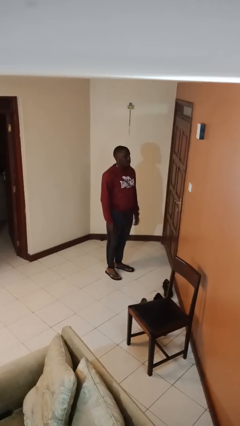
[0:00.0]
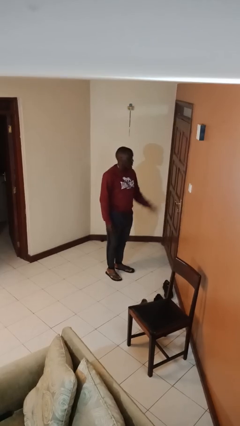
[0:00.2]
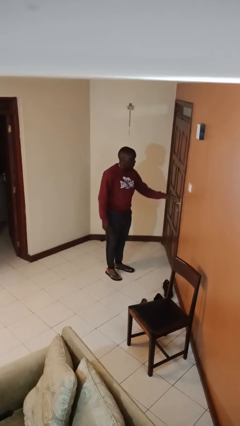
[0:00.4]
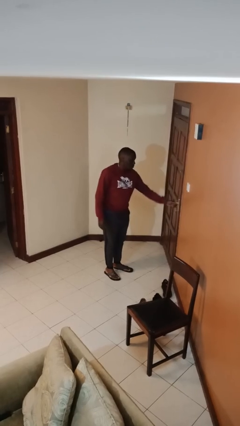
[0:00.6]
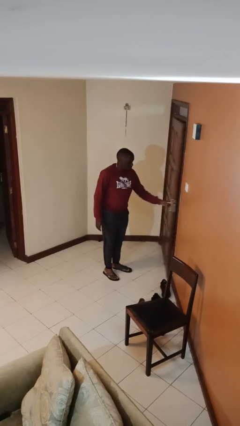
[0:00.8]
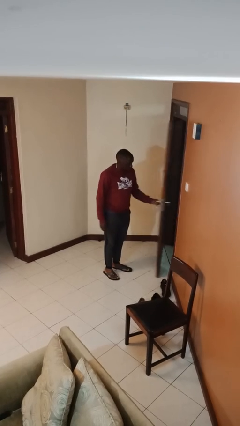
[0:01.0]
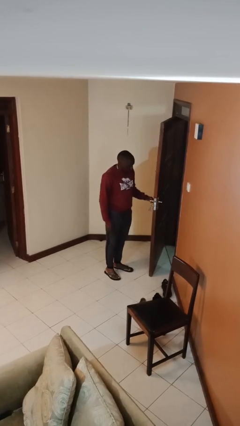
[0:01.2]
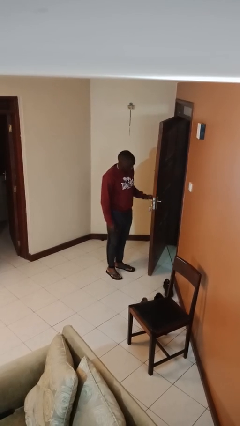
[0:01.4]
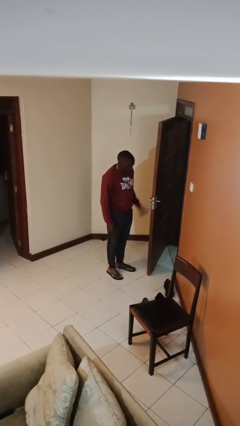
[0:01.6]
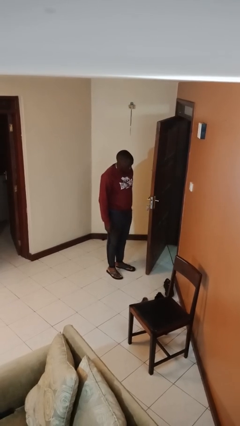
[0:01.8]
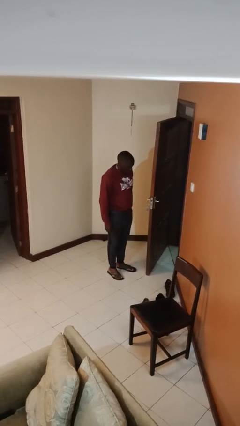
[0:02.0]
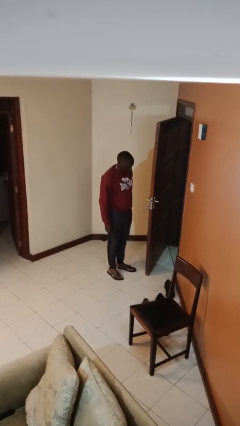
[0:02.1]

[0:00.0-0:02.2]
person opens facility door

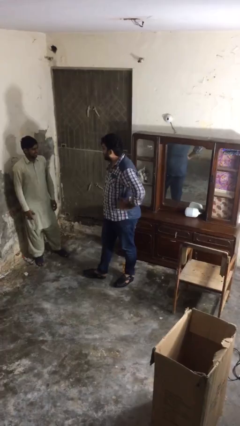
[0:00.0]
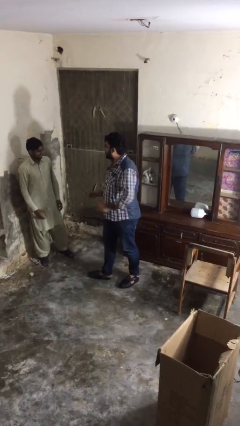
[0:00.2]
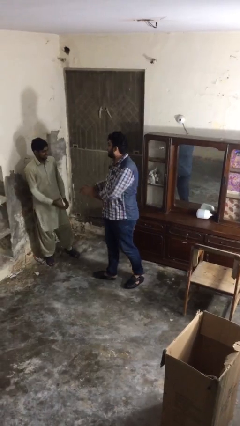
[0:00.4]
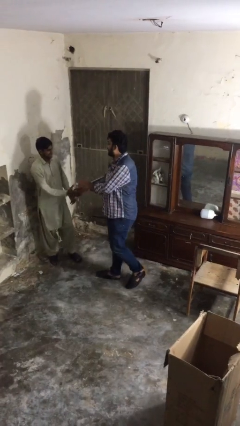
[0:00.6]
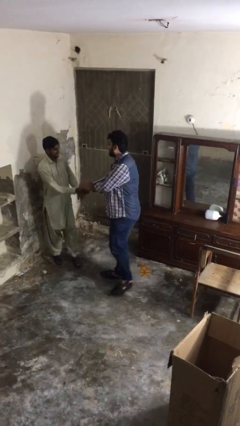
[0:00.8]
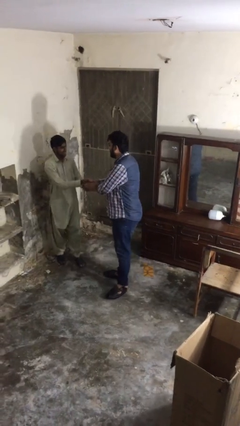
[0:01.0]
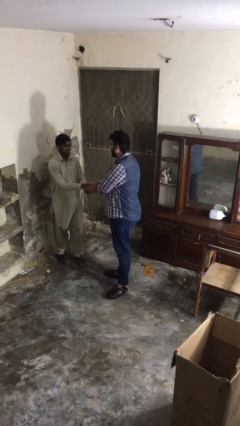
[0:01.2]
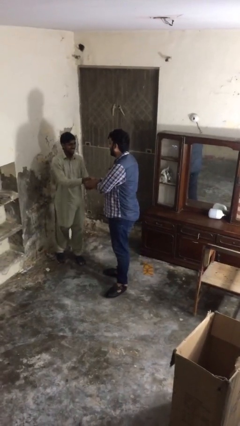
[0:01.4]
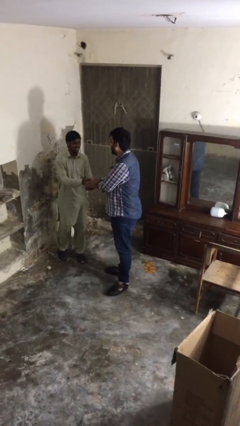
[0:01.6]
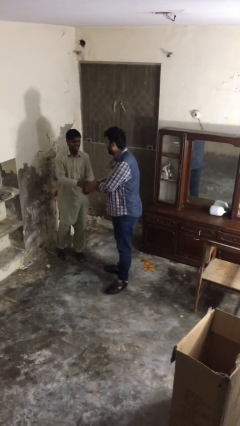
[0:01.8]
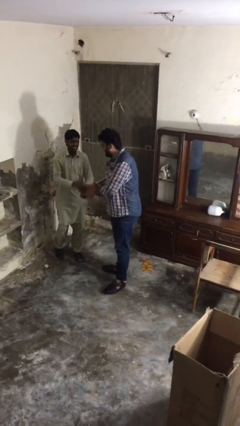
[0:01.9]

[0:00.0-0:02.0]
person shakes hand

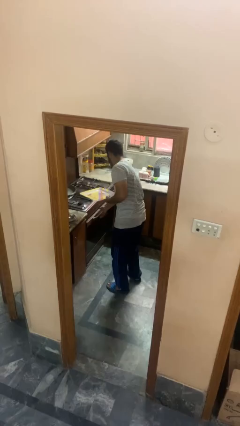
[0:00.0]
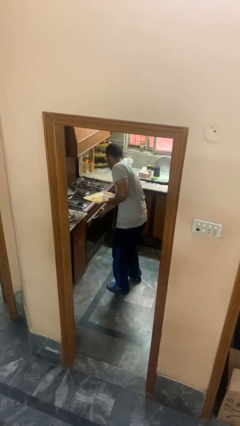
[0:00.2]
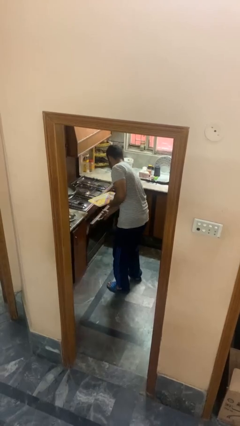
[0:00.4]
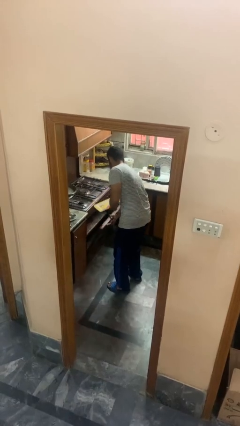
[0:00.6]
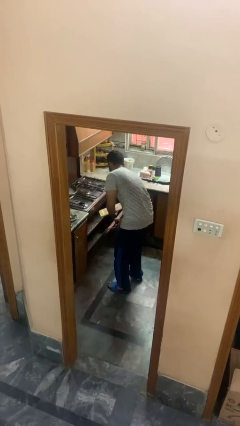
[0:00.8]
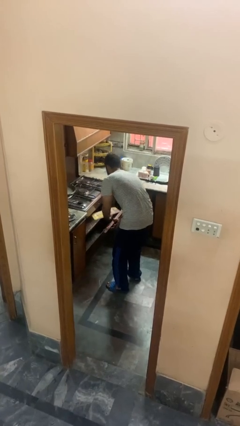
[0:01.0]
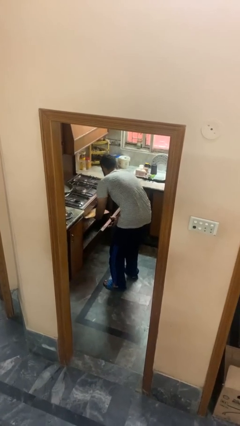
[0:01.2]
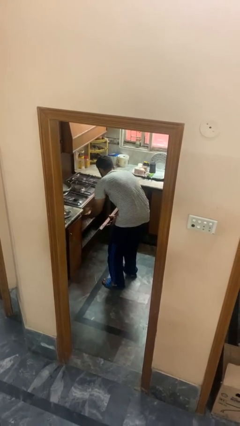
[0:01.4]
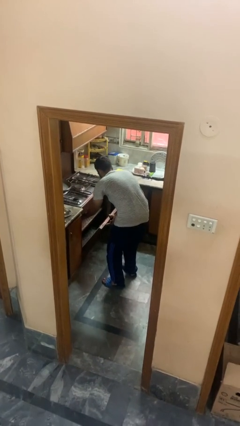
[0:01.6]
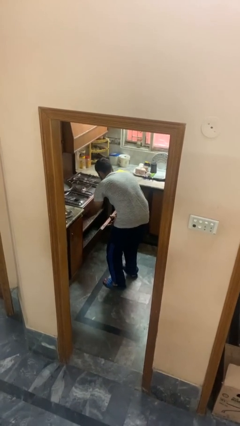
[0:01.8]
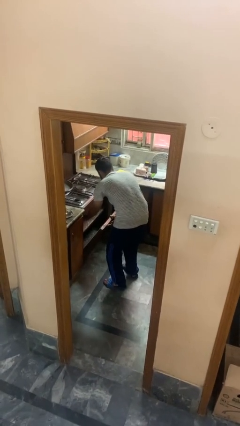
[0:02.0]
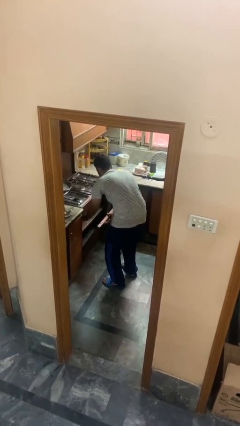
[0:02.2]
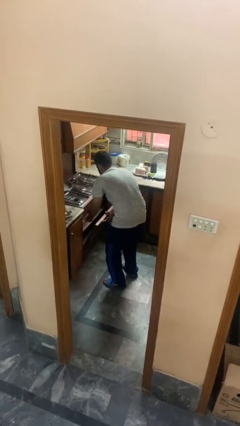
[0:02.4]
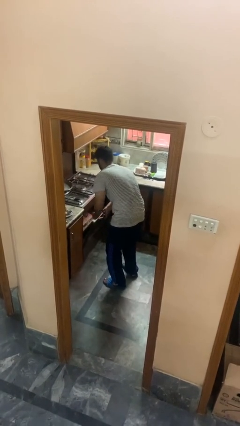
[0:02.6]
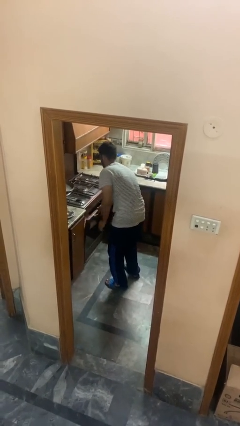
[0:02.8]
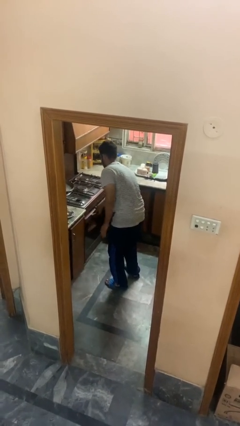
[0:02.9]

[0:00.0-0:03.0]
person puts object into oven

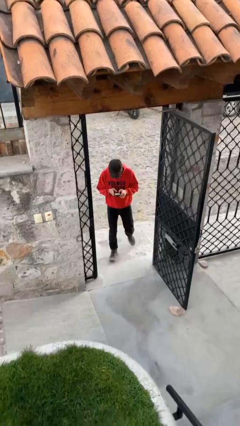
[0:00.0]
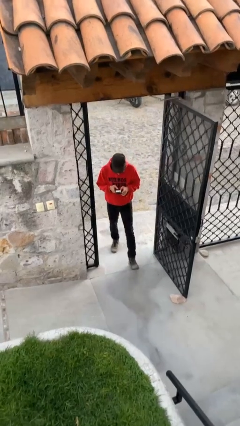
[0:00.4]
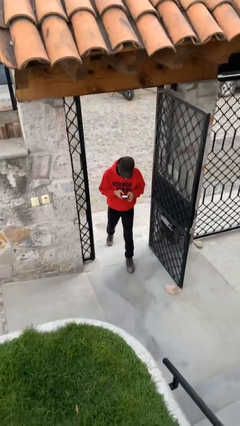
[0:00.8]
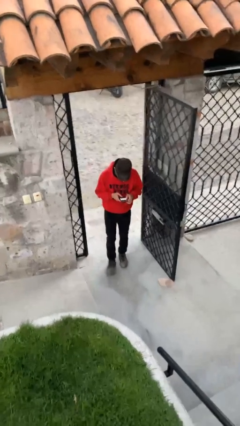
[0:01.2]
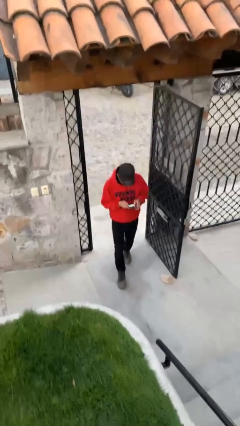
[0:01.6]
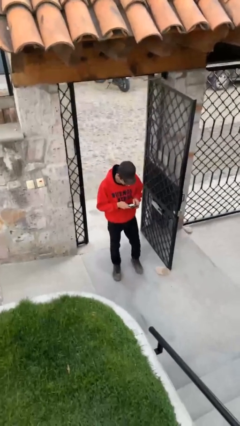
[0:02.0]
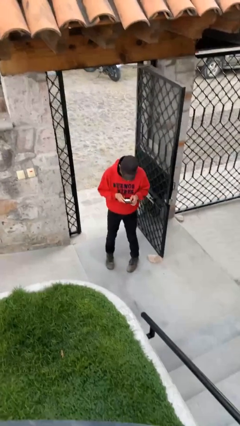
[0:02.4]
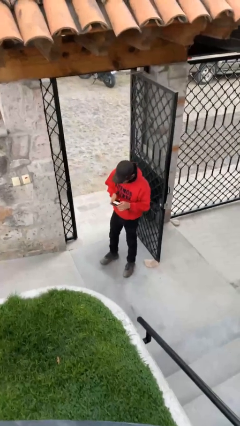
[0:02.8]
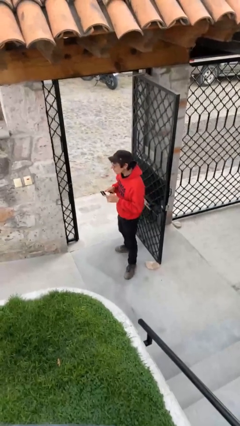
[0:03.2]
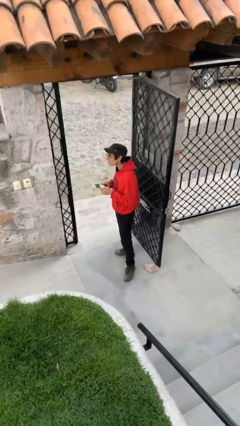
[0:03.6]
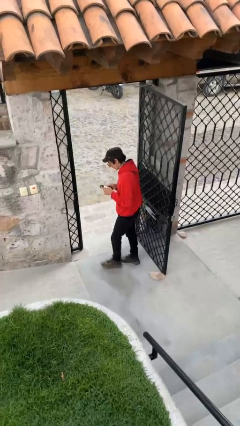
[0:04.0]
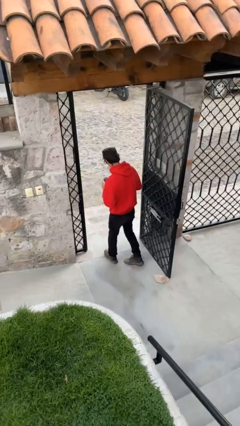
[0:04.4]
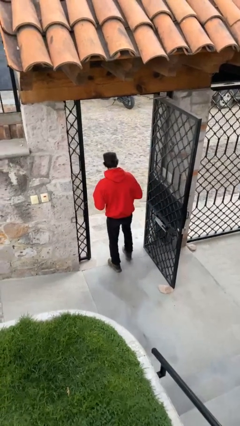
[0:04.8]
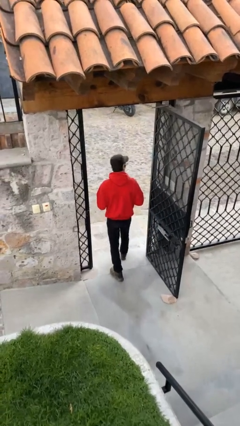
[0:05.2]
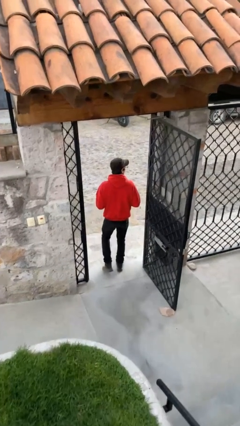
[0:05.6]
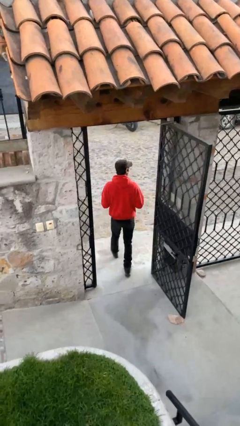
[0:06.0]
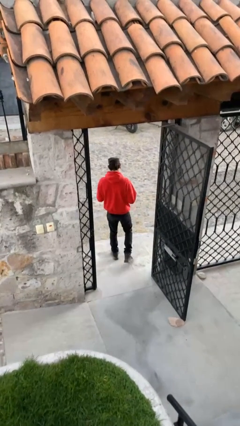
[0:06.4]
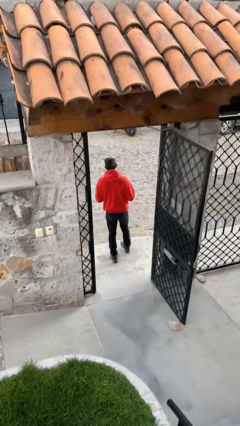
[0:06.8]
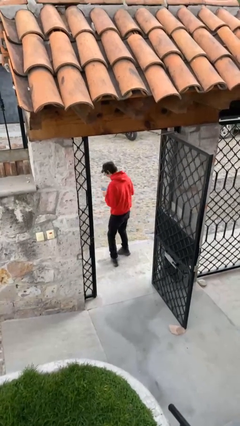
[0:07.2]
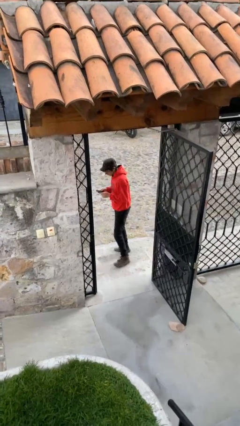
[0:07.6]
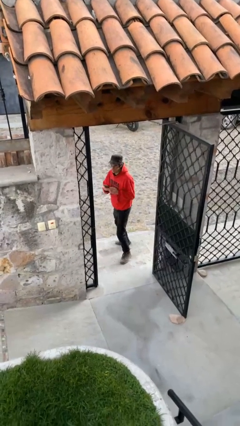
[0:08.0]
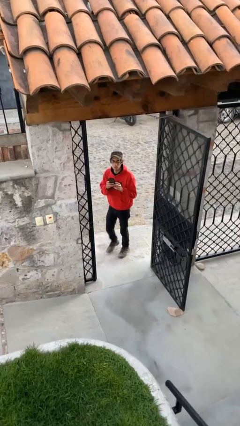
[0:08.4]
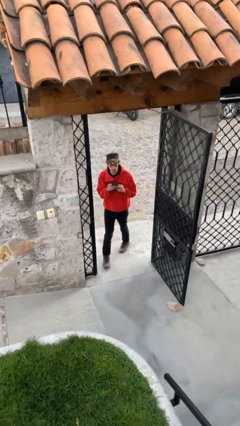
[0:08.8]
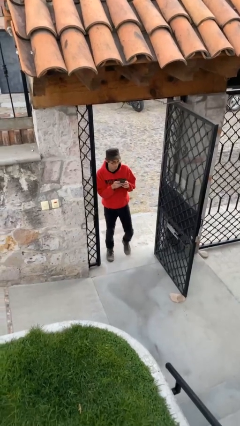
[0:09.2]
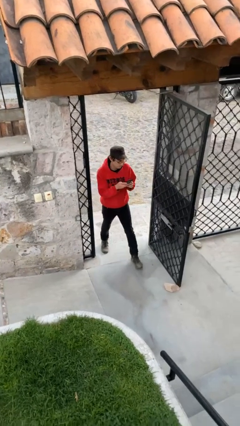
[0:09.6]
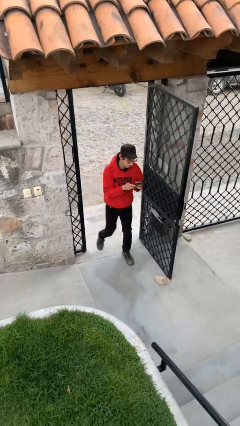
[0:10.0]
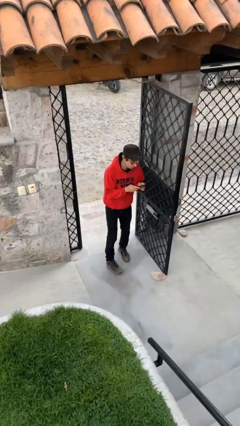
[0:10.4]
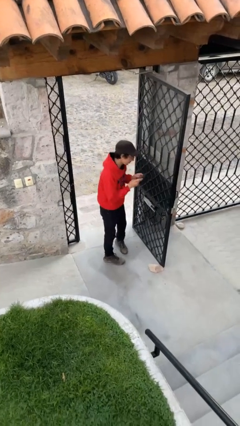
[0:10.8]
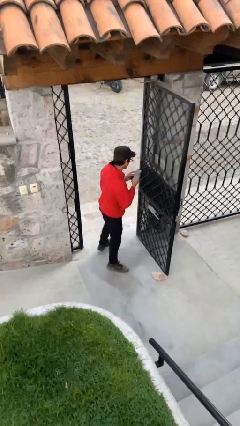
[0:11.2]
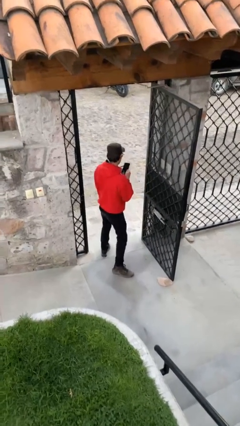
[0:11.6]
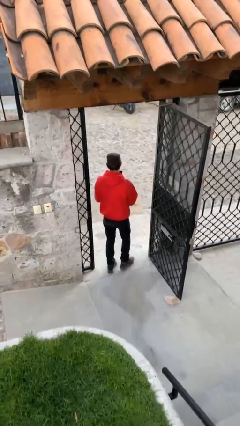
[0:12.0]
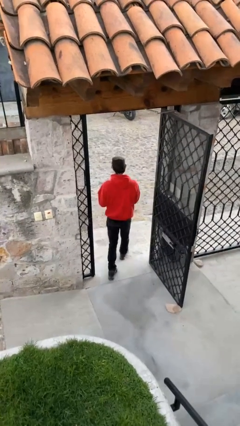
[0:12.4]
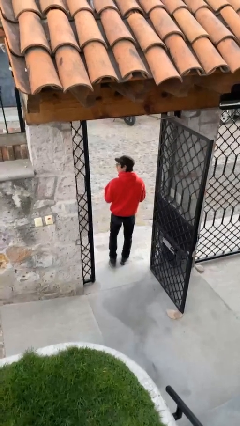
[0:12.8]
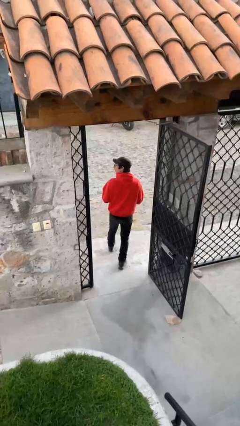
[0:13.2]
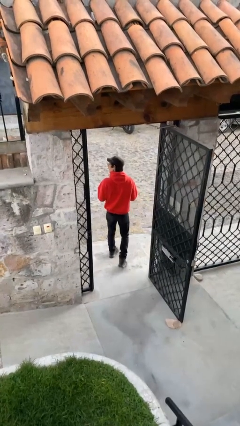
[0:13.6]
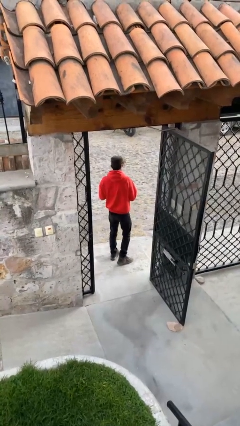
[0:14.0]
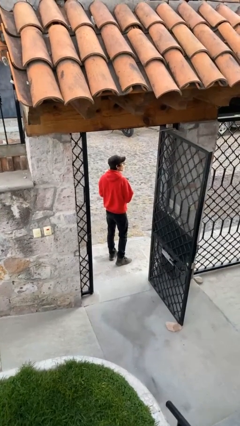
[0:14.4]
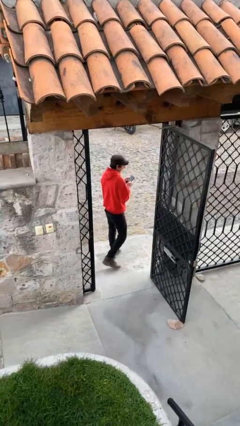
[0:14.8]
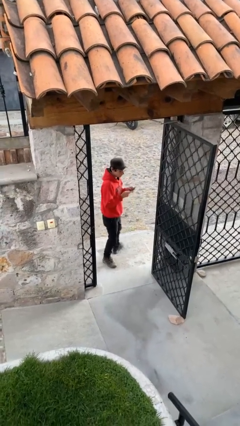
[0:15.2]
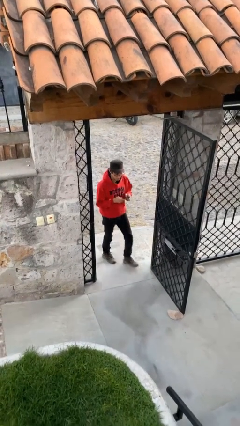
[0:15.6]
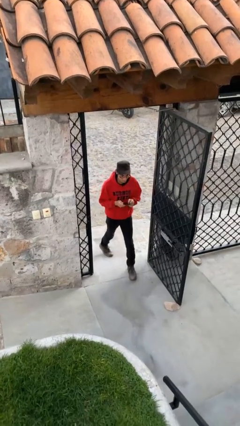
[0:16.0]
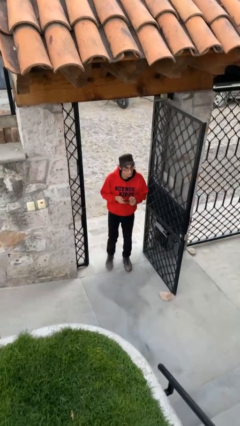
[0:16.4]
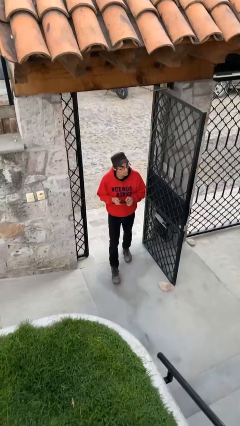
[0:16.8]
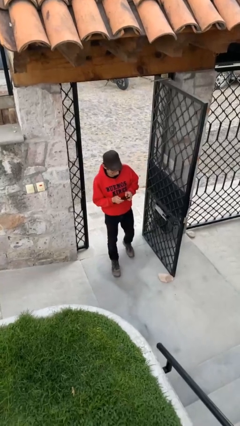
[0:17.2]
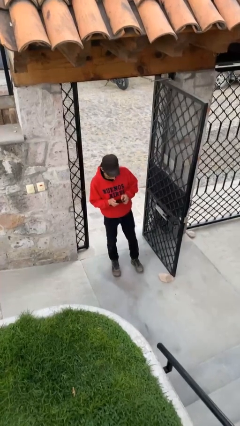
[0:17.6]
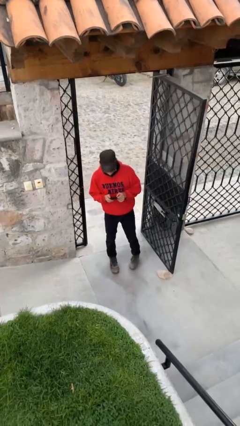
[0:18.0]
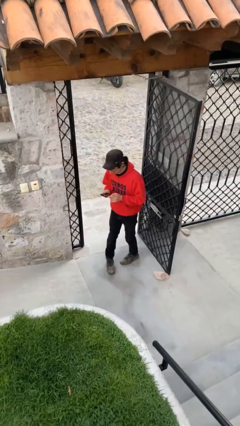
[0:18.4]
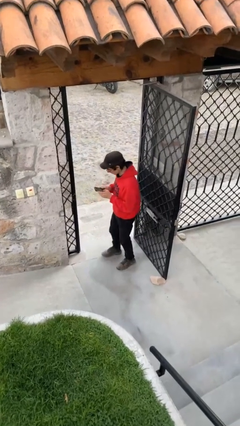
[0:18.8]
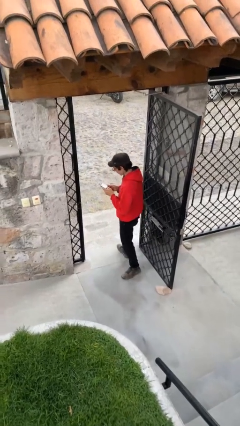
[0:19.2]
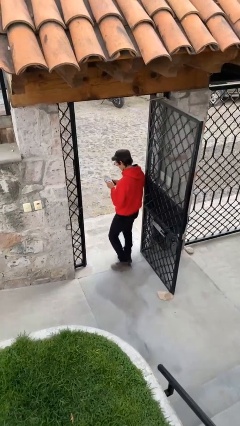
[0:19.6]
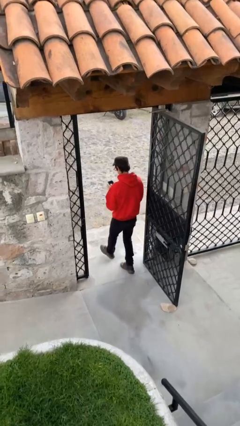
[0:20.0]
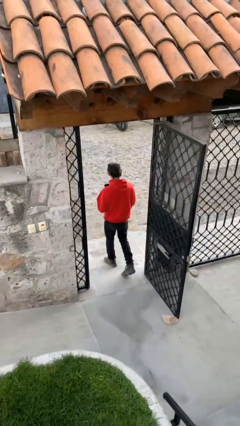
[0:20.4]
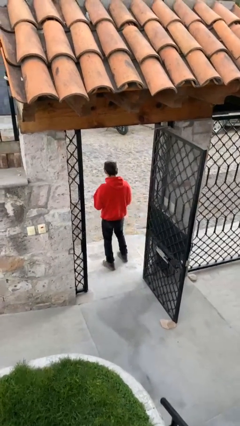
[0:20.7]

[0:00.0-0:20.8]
person texts on phone
